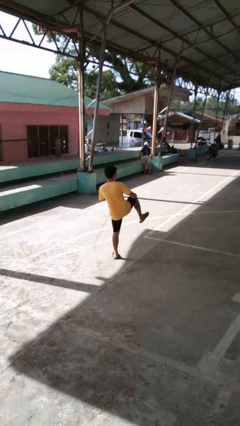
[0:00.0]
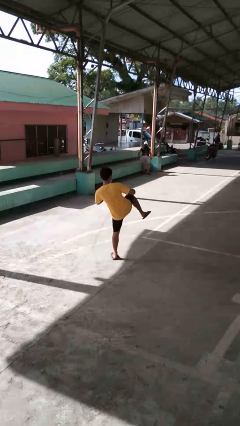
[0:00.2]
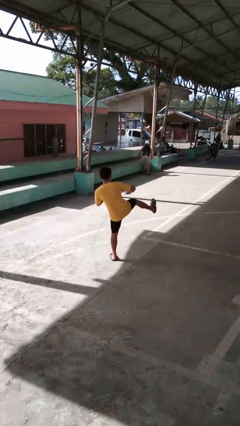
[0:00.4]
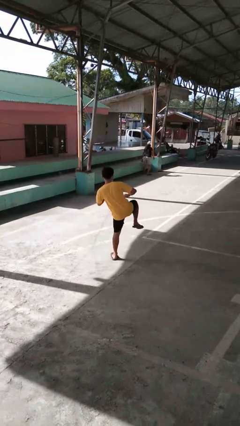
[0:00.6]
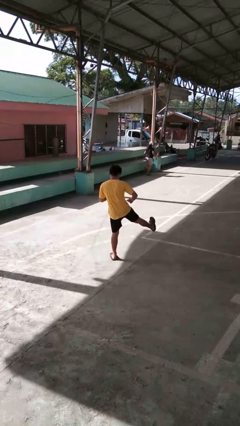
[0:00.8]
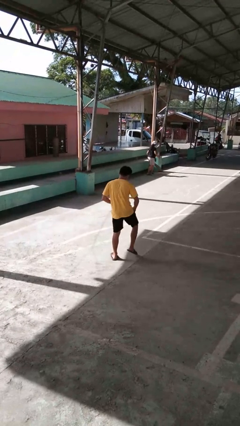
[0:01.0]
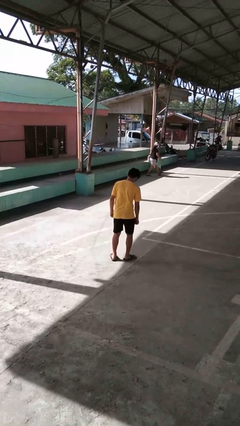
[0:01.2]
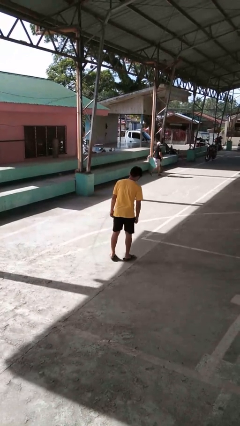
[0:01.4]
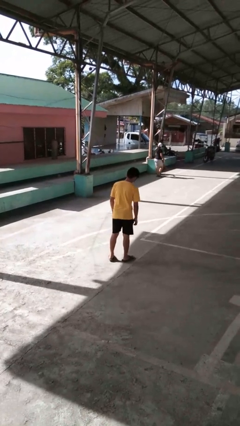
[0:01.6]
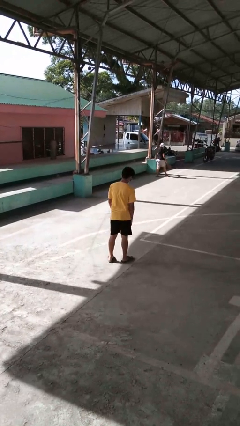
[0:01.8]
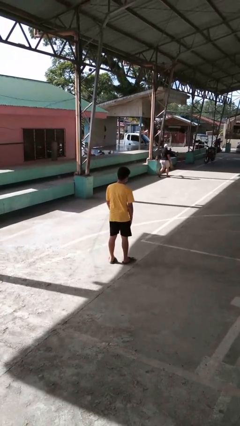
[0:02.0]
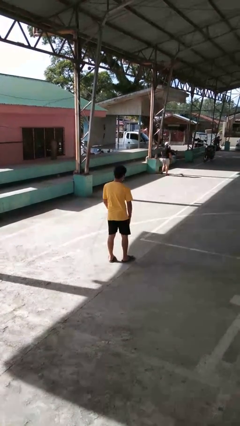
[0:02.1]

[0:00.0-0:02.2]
person karate kicks

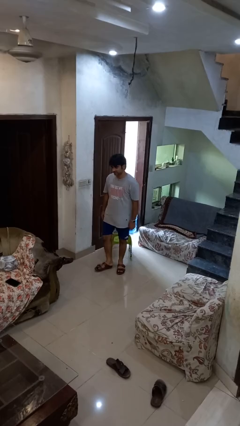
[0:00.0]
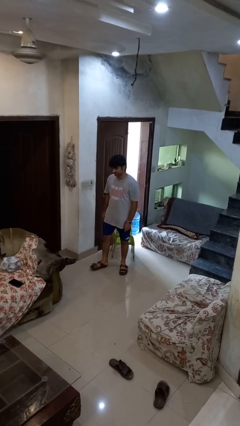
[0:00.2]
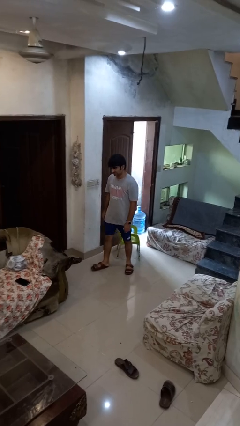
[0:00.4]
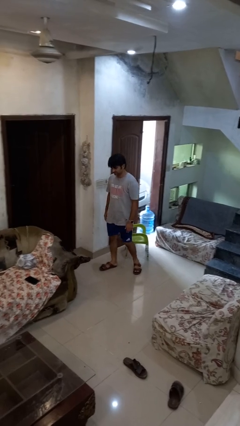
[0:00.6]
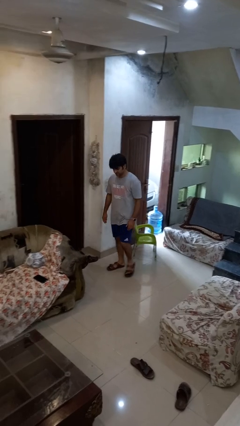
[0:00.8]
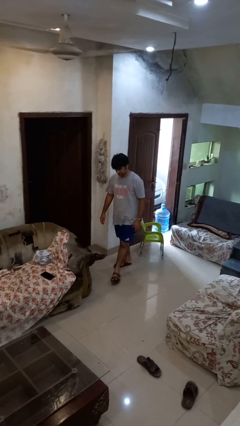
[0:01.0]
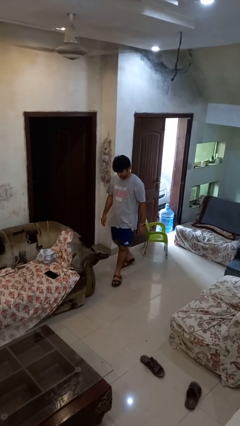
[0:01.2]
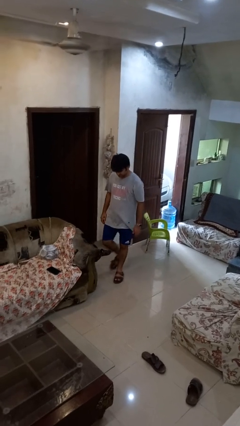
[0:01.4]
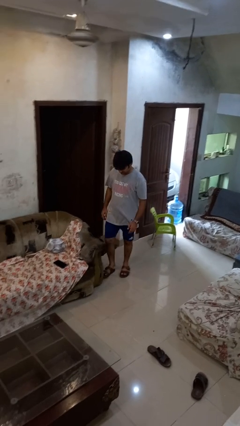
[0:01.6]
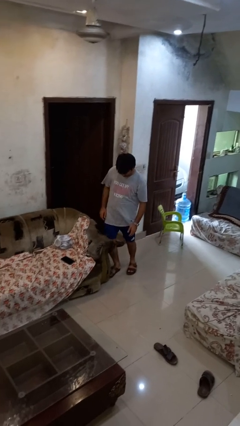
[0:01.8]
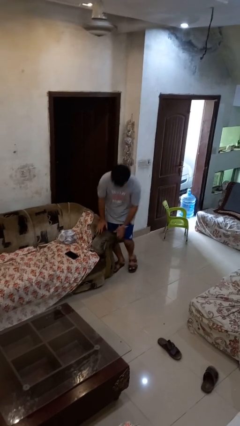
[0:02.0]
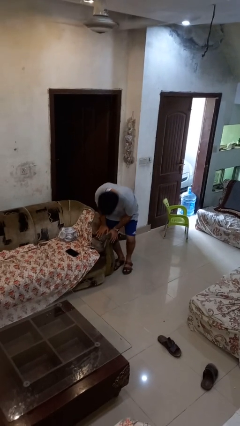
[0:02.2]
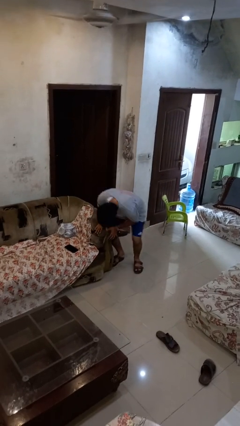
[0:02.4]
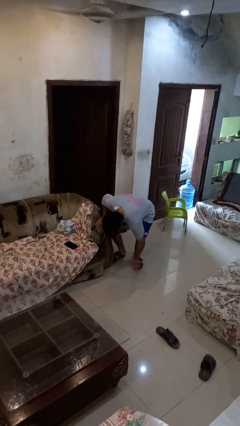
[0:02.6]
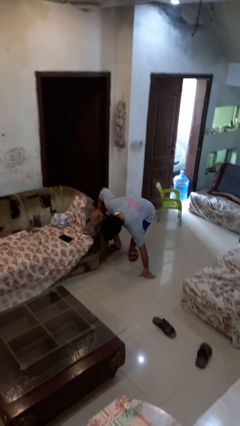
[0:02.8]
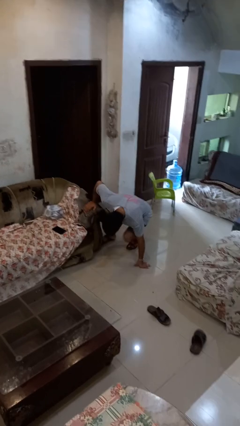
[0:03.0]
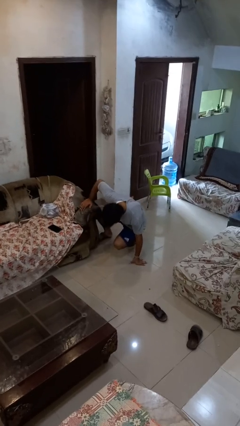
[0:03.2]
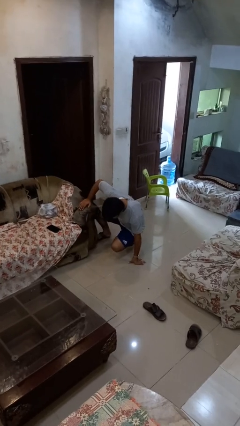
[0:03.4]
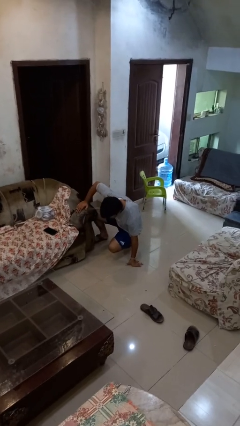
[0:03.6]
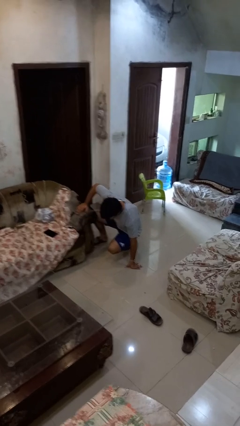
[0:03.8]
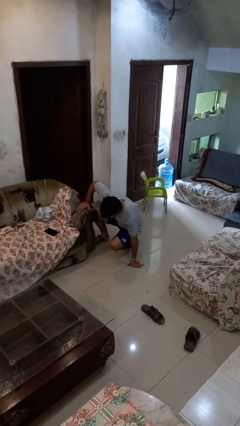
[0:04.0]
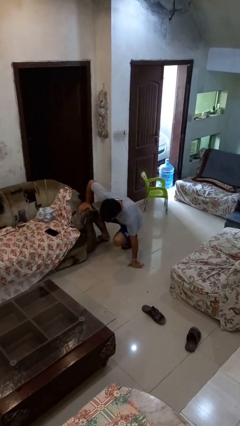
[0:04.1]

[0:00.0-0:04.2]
person trips on object on floor

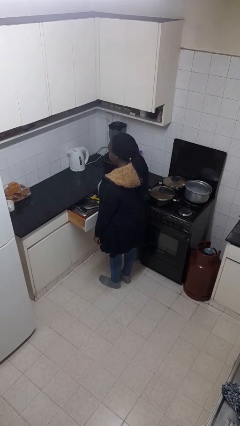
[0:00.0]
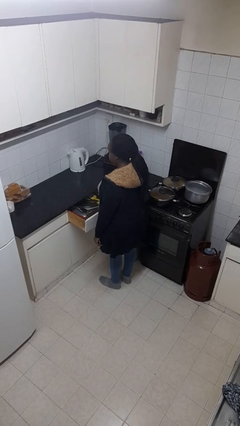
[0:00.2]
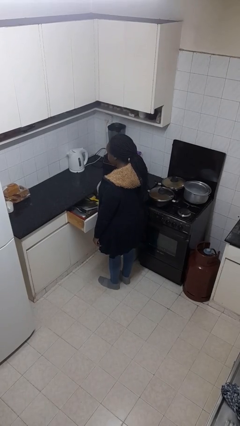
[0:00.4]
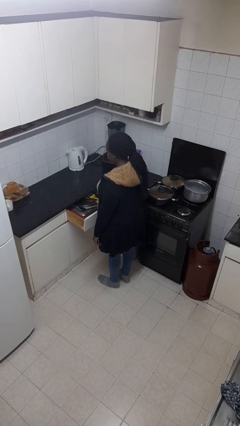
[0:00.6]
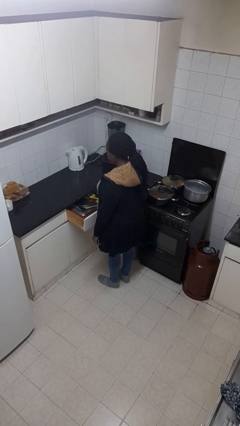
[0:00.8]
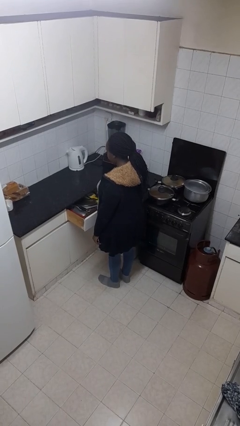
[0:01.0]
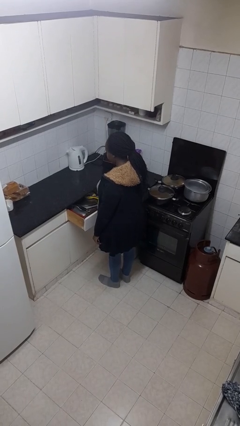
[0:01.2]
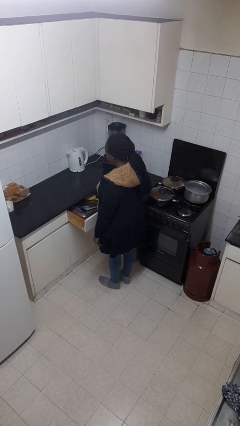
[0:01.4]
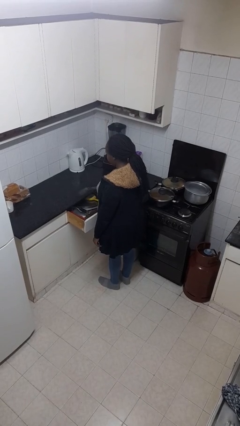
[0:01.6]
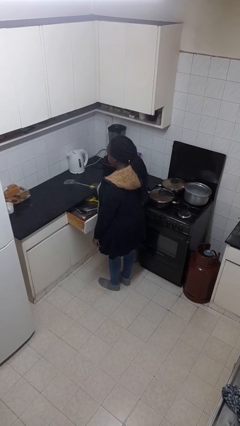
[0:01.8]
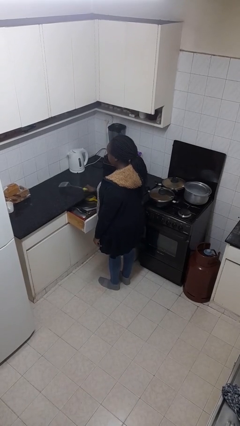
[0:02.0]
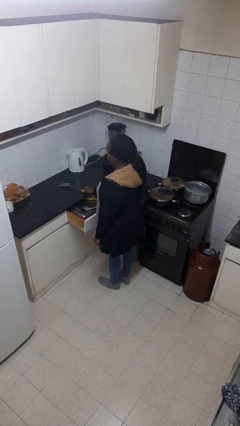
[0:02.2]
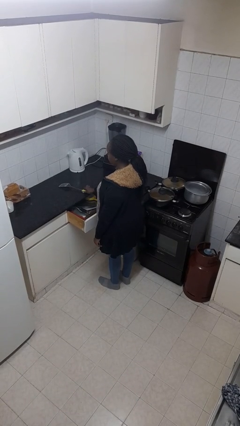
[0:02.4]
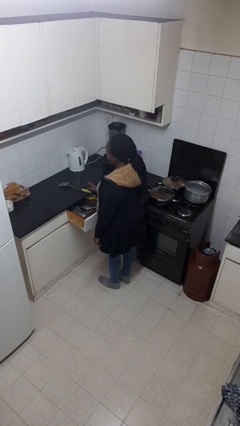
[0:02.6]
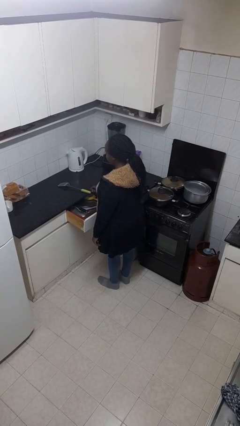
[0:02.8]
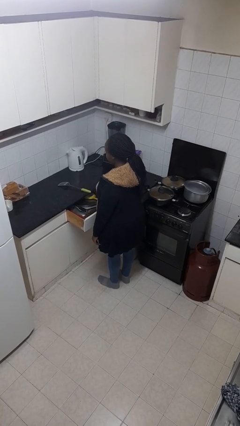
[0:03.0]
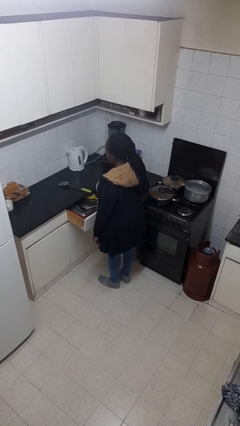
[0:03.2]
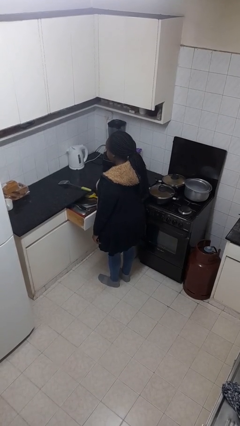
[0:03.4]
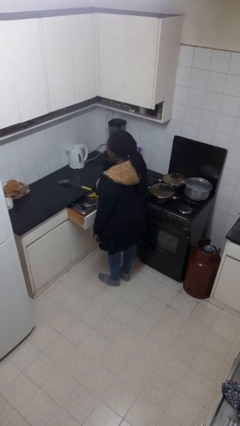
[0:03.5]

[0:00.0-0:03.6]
person takes object from kitchen drawer

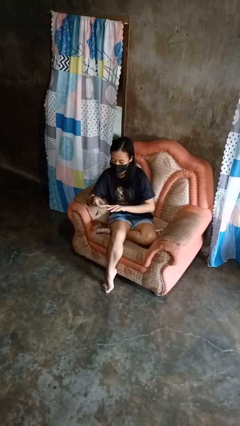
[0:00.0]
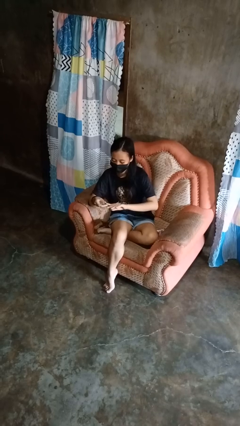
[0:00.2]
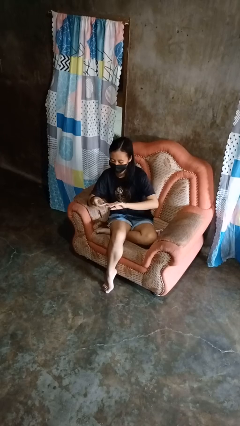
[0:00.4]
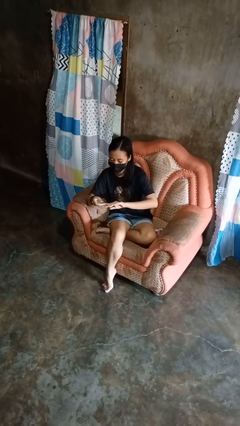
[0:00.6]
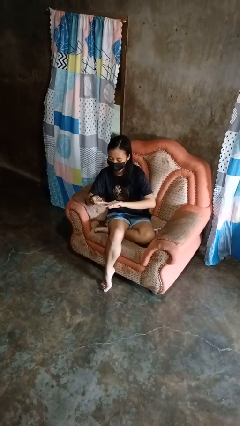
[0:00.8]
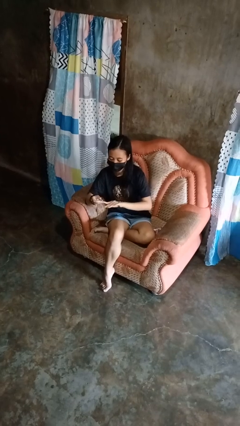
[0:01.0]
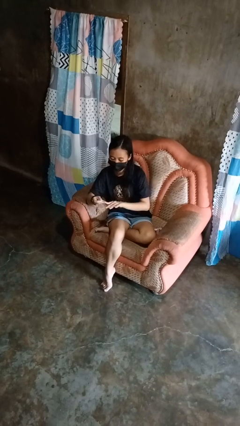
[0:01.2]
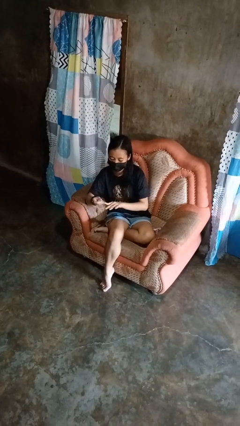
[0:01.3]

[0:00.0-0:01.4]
person clips fingernails

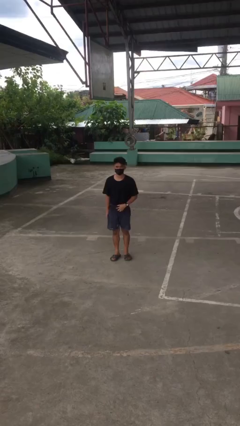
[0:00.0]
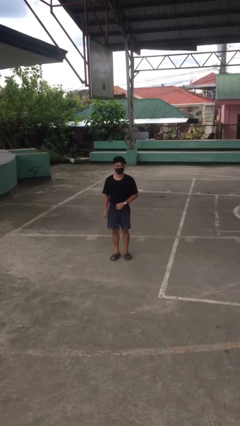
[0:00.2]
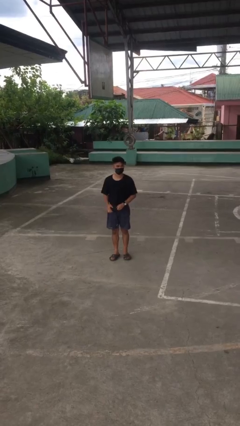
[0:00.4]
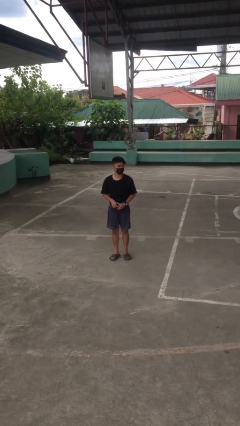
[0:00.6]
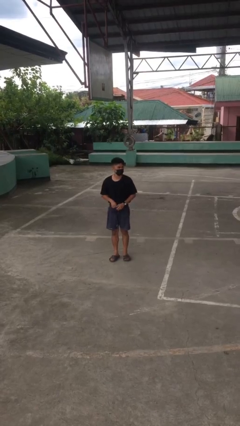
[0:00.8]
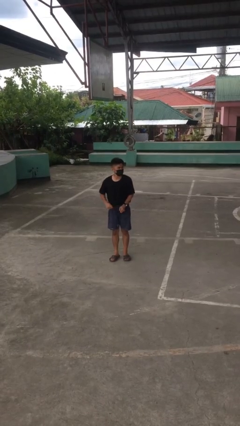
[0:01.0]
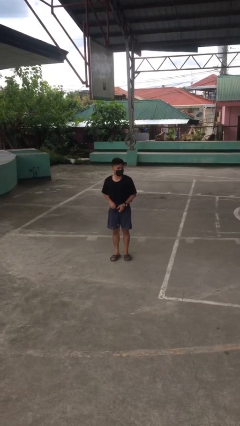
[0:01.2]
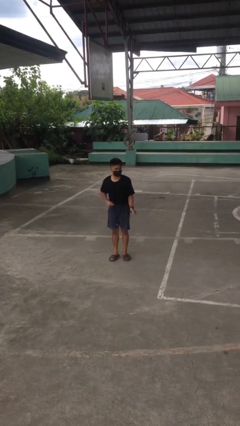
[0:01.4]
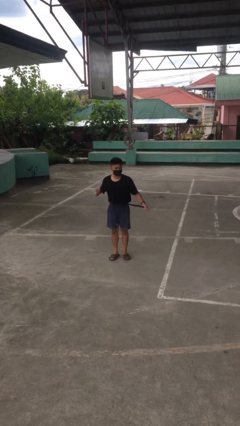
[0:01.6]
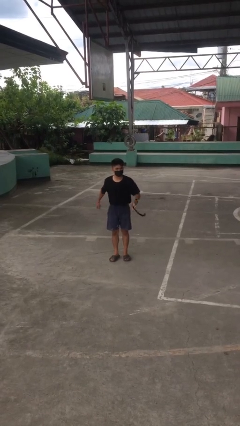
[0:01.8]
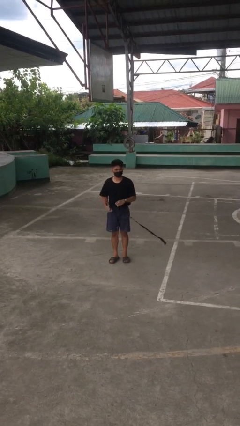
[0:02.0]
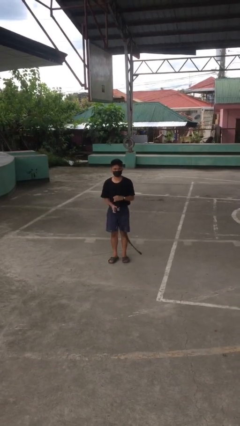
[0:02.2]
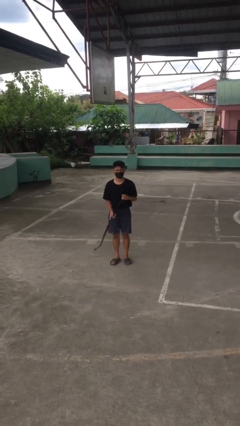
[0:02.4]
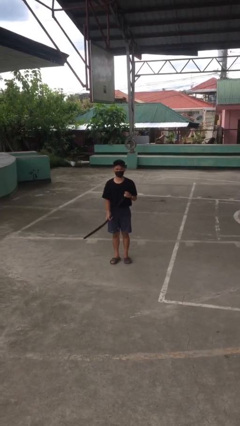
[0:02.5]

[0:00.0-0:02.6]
person takes off belt

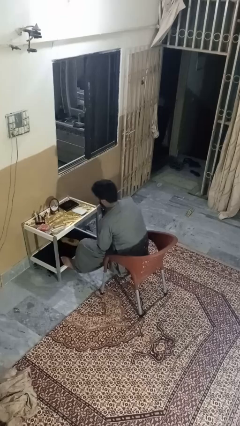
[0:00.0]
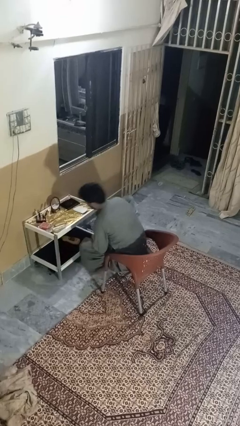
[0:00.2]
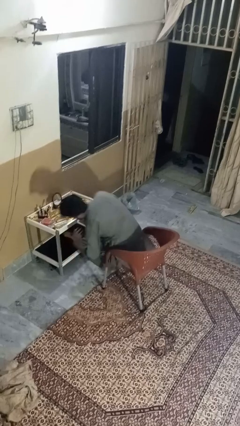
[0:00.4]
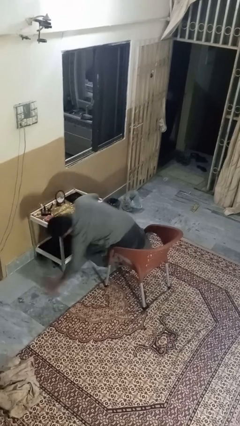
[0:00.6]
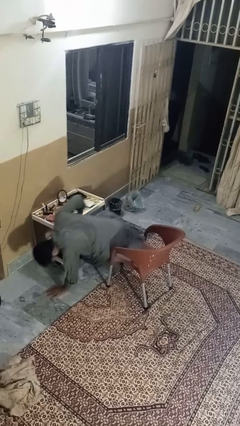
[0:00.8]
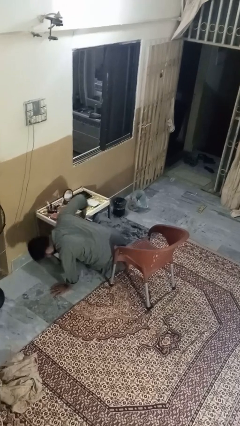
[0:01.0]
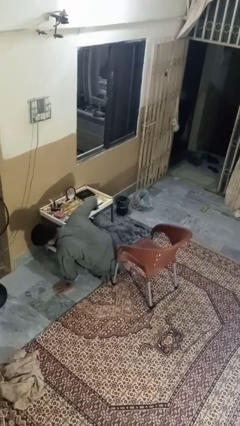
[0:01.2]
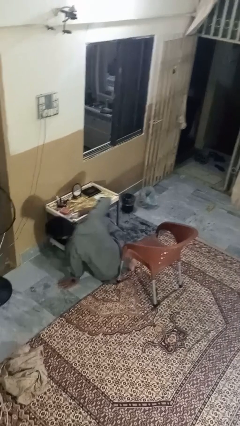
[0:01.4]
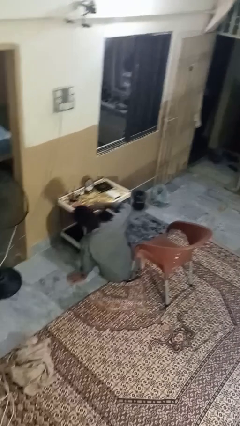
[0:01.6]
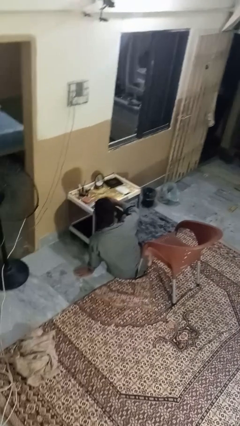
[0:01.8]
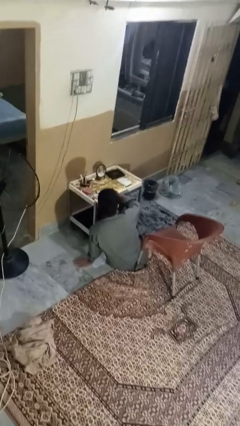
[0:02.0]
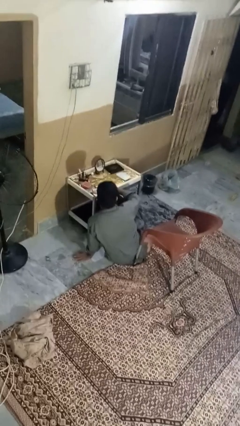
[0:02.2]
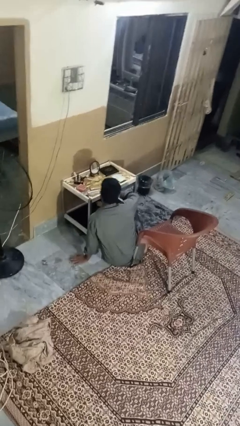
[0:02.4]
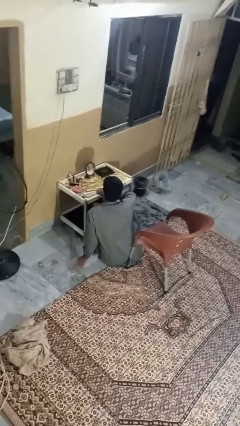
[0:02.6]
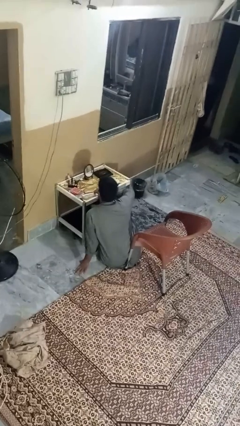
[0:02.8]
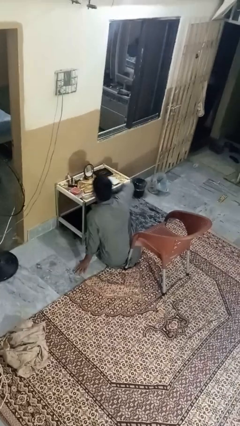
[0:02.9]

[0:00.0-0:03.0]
person falls from chair

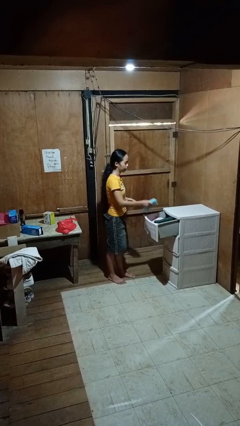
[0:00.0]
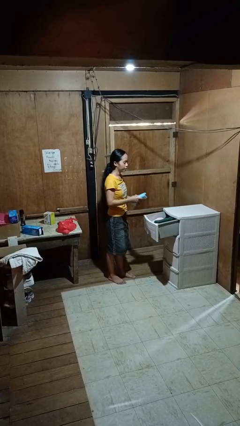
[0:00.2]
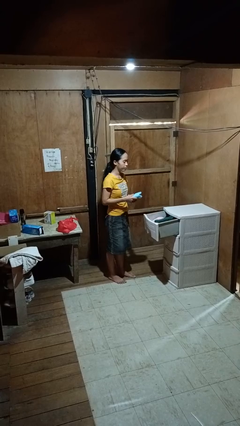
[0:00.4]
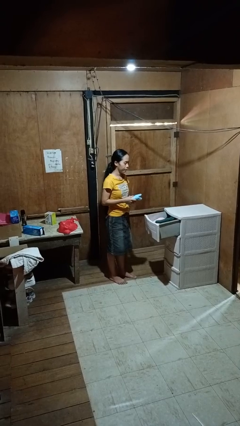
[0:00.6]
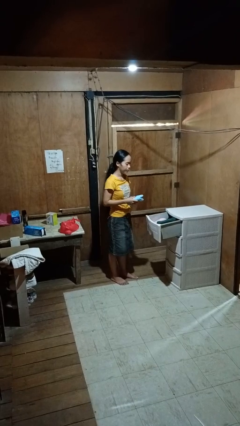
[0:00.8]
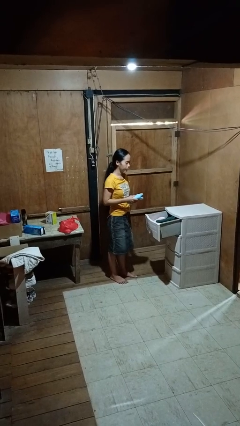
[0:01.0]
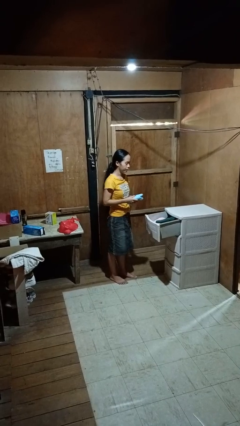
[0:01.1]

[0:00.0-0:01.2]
person takes clothes from dresser
